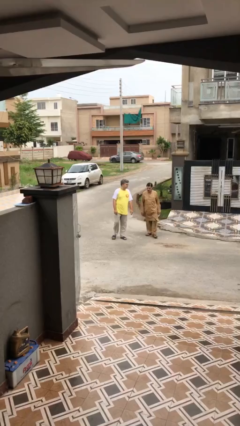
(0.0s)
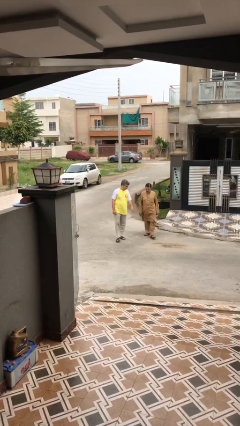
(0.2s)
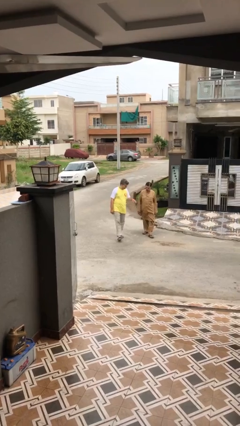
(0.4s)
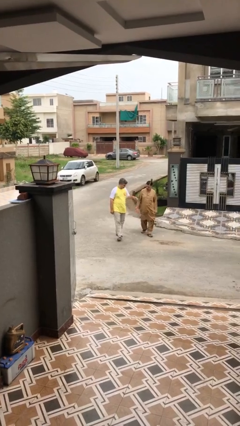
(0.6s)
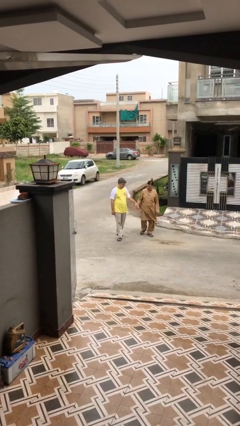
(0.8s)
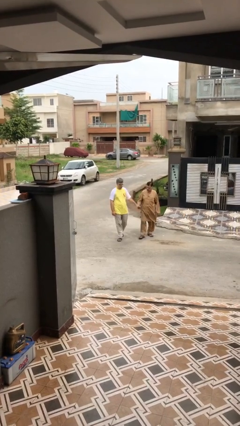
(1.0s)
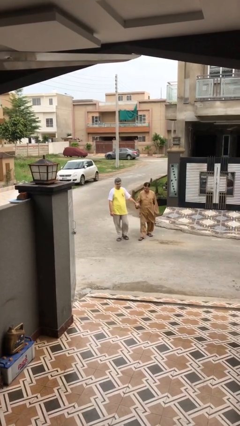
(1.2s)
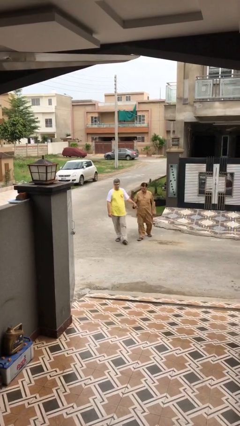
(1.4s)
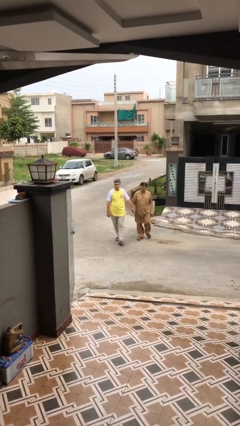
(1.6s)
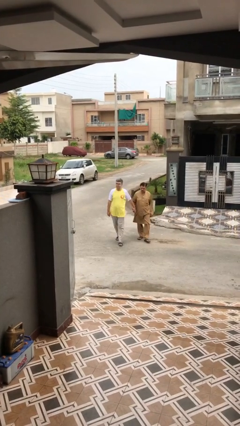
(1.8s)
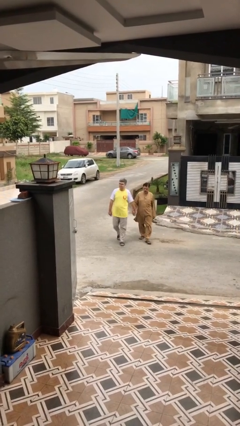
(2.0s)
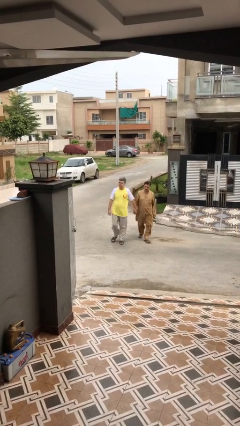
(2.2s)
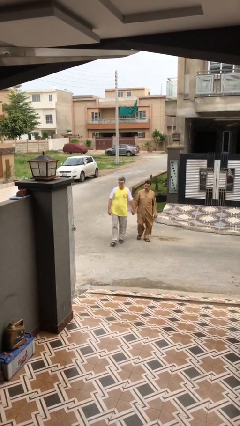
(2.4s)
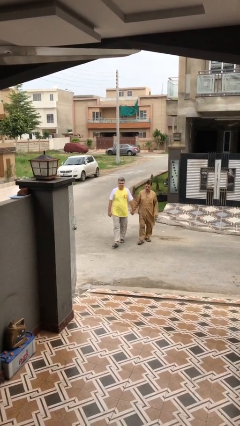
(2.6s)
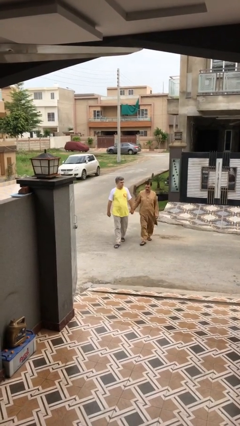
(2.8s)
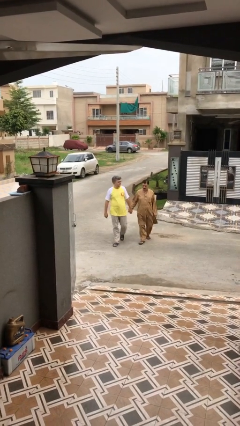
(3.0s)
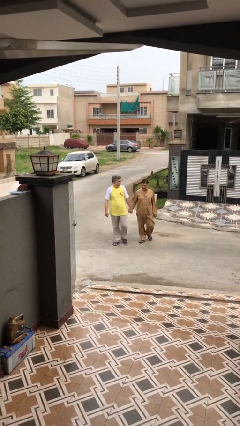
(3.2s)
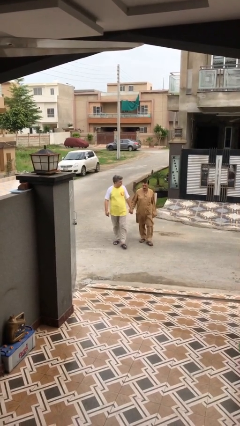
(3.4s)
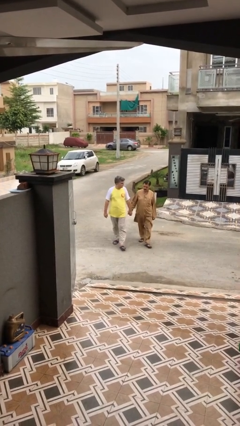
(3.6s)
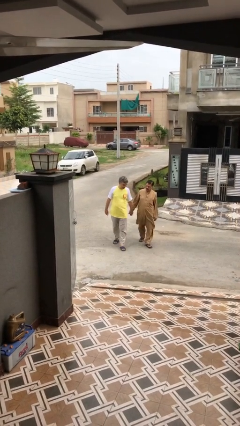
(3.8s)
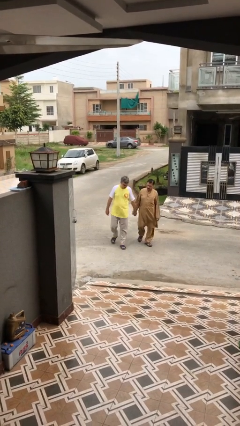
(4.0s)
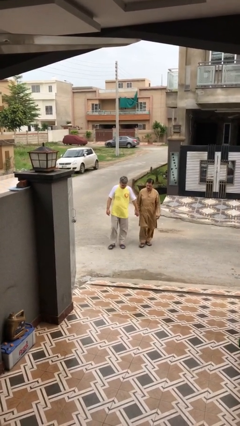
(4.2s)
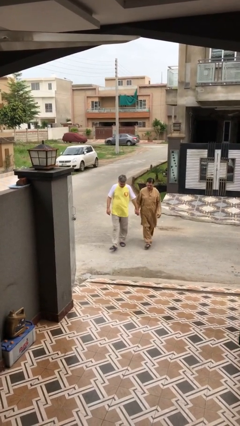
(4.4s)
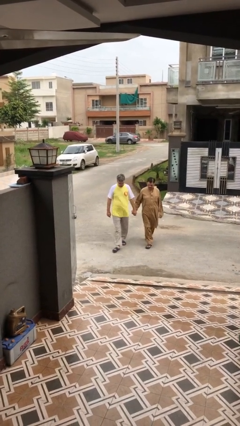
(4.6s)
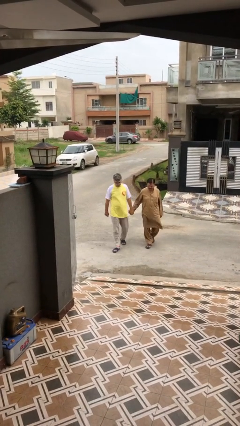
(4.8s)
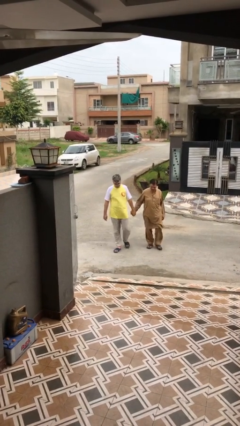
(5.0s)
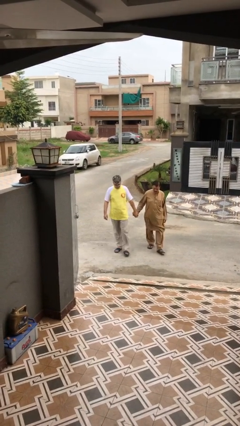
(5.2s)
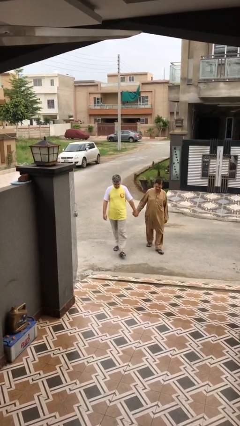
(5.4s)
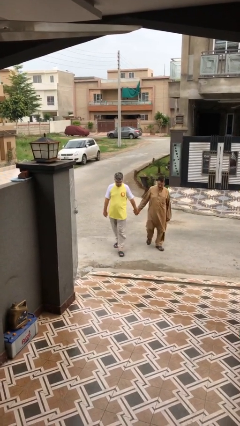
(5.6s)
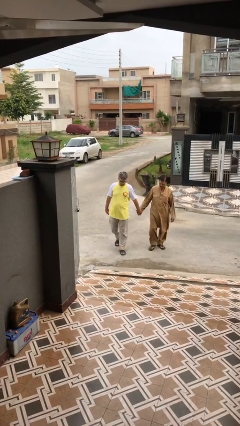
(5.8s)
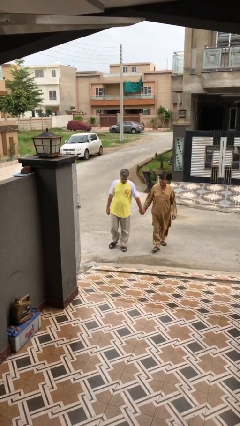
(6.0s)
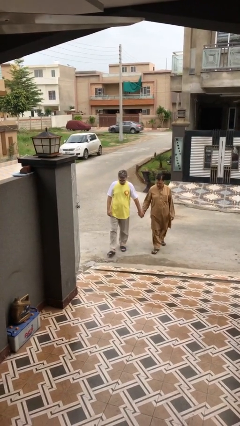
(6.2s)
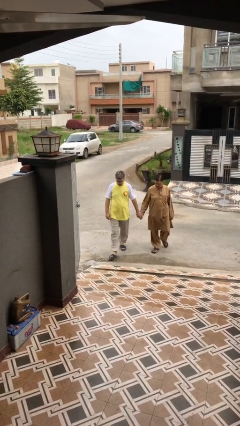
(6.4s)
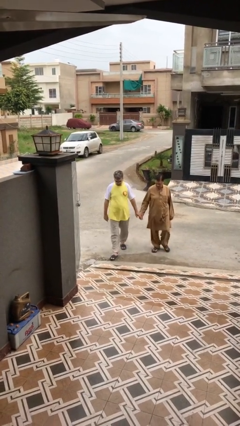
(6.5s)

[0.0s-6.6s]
person holds hand

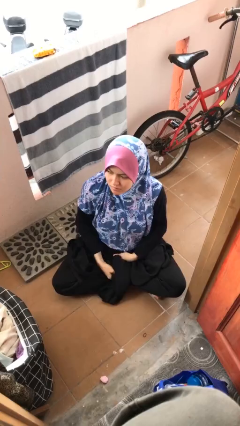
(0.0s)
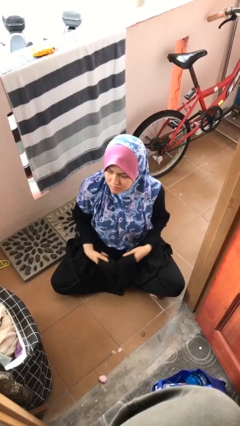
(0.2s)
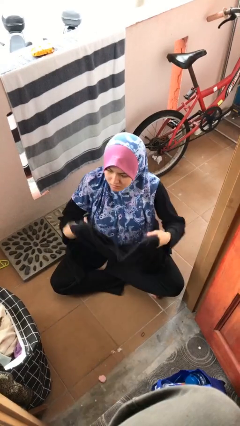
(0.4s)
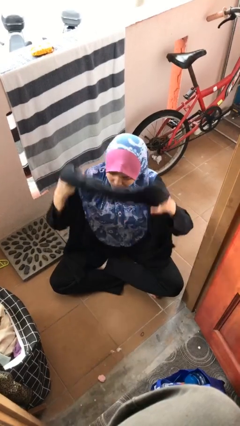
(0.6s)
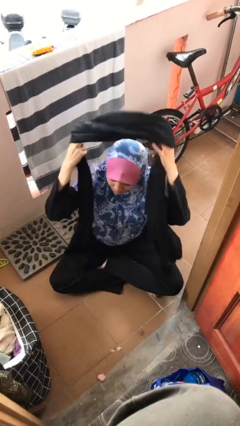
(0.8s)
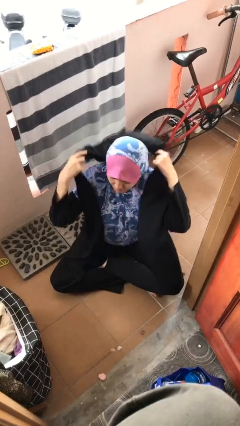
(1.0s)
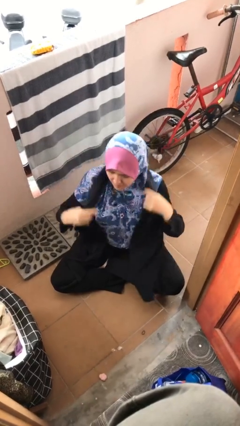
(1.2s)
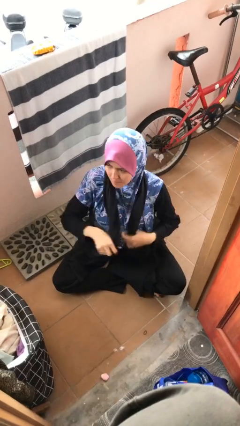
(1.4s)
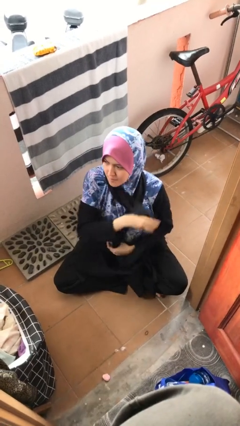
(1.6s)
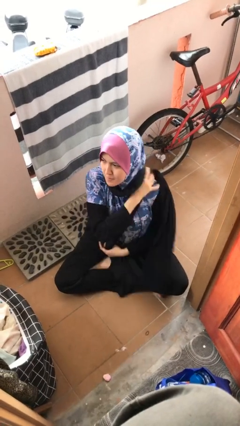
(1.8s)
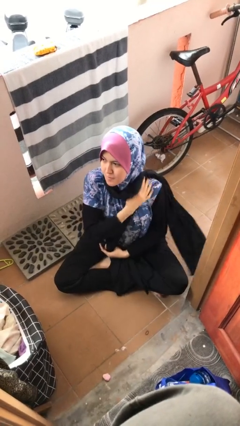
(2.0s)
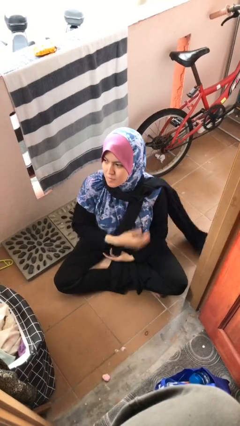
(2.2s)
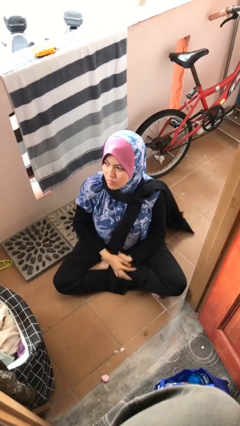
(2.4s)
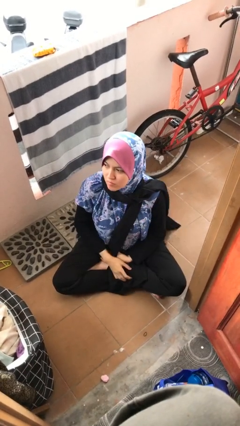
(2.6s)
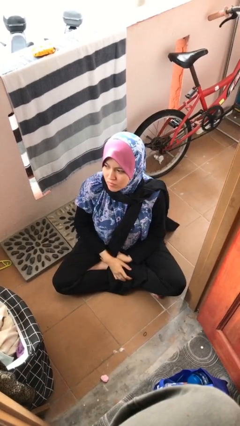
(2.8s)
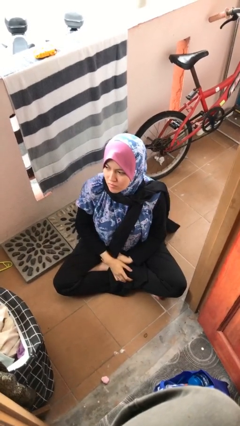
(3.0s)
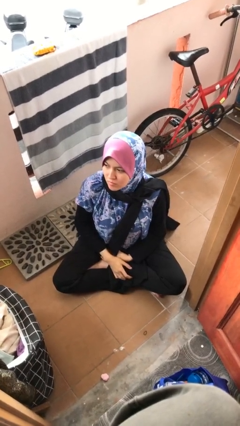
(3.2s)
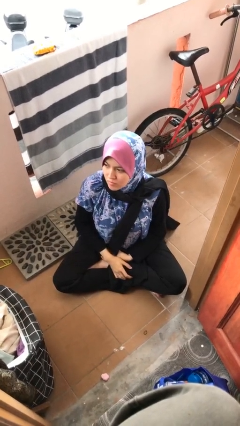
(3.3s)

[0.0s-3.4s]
person puts on scarf

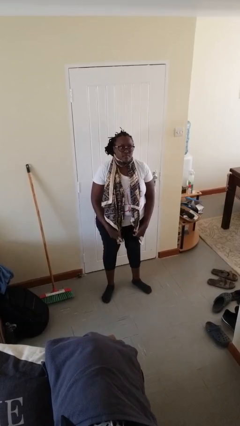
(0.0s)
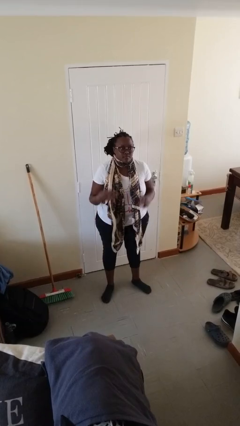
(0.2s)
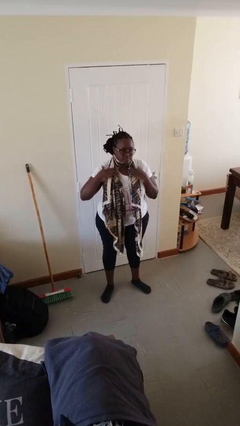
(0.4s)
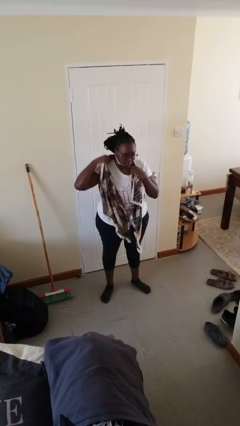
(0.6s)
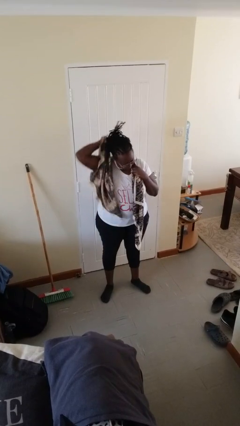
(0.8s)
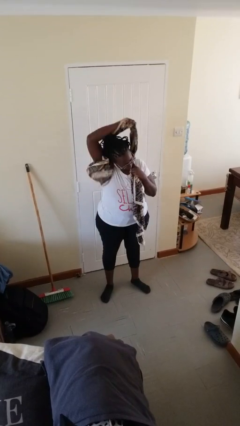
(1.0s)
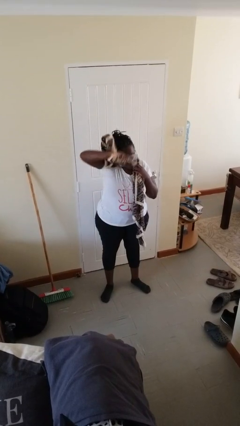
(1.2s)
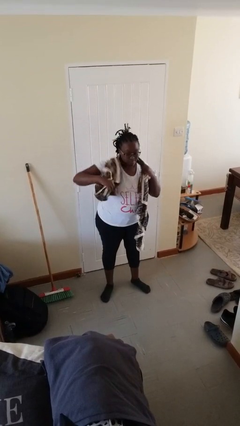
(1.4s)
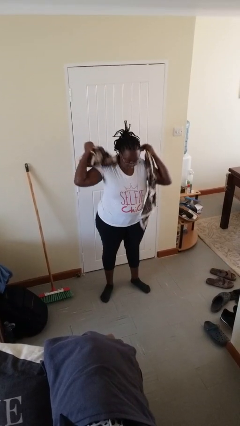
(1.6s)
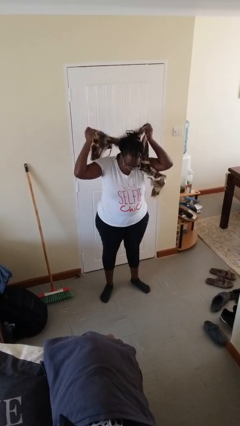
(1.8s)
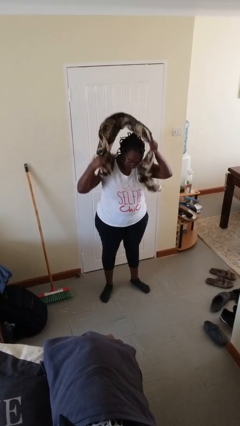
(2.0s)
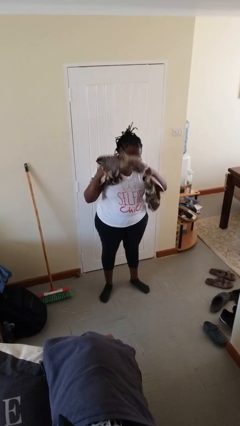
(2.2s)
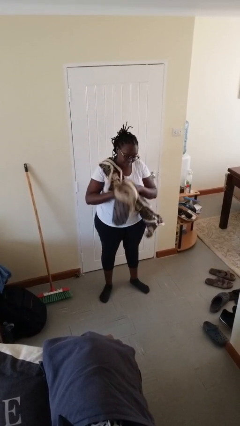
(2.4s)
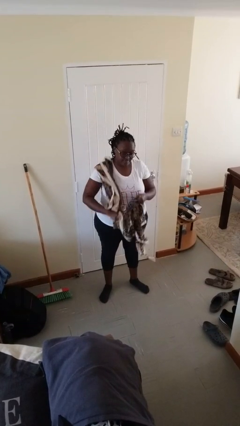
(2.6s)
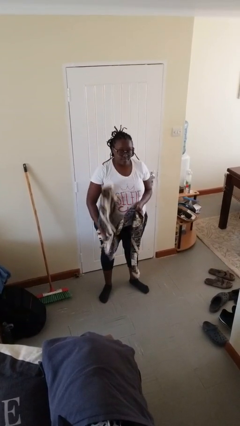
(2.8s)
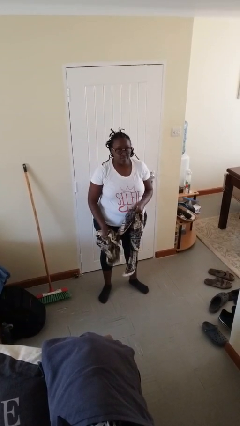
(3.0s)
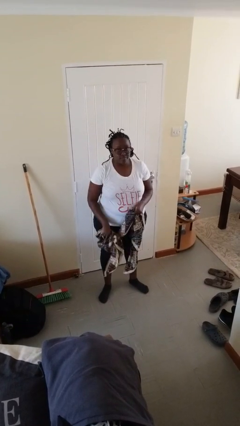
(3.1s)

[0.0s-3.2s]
person takes off scarf

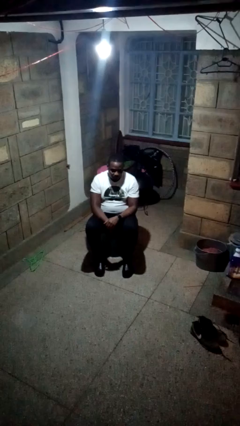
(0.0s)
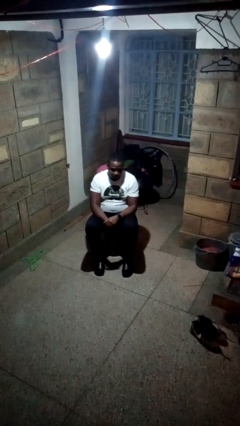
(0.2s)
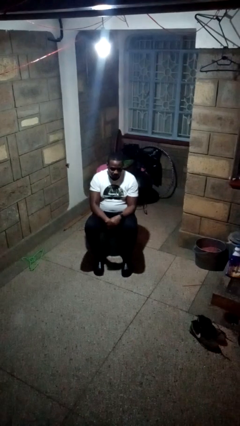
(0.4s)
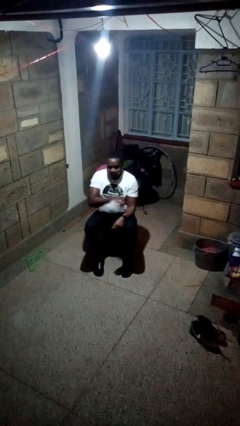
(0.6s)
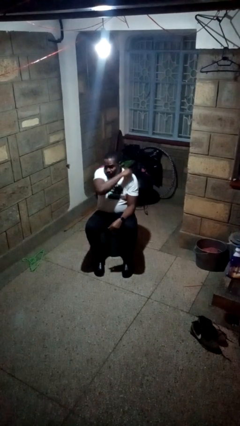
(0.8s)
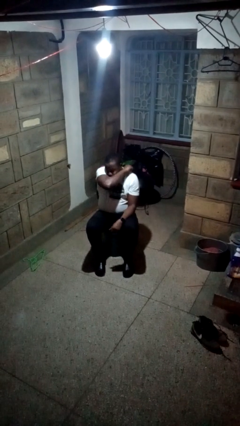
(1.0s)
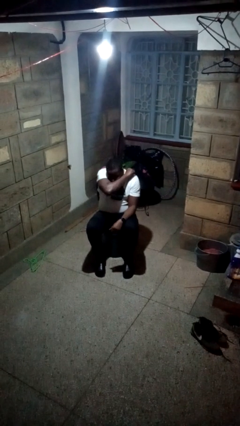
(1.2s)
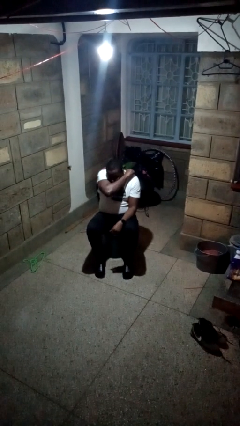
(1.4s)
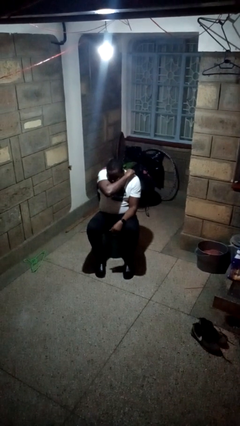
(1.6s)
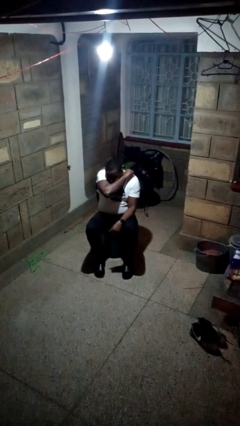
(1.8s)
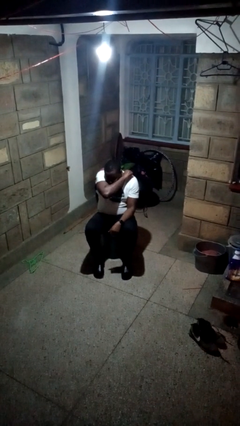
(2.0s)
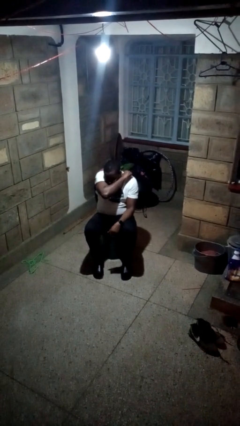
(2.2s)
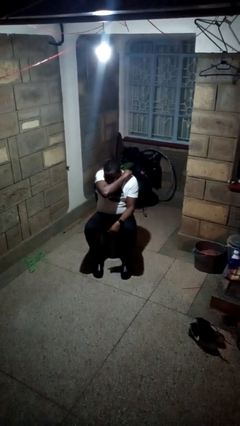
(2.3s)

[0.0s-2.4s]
person sneezes into arm

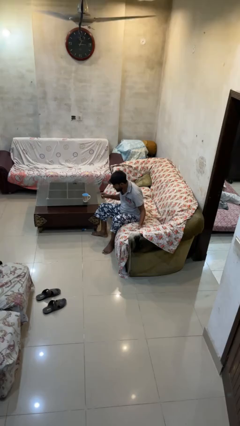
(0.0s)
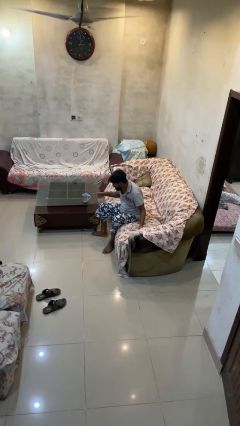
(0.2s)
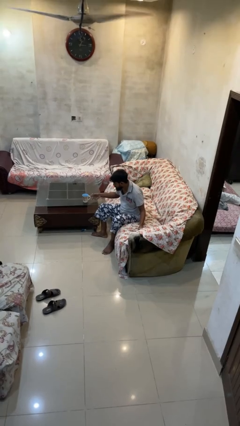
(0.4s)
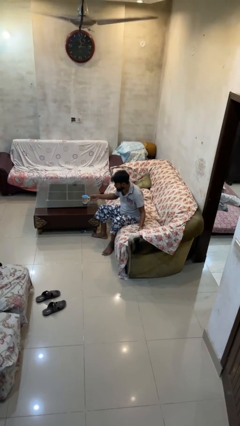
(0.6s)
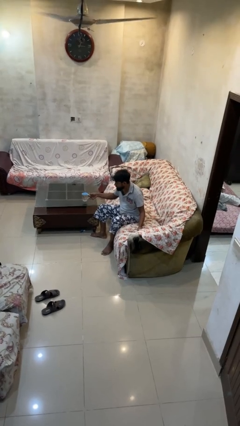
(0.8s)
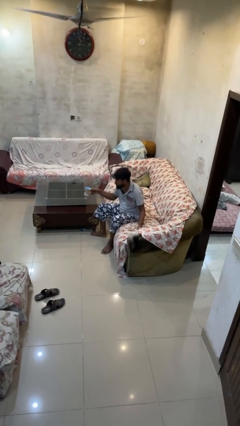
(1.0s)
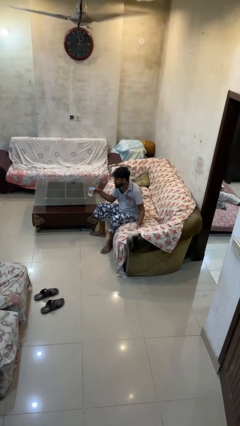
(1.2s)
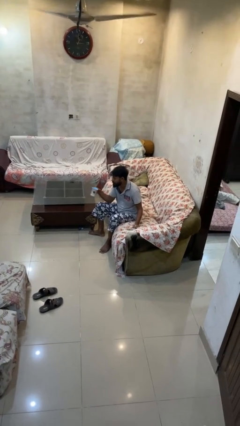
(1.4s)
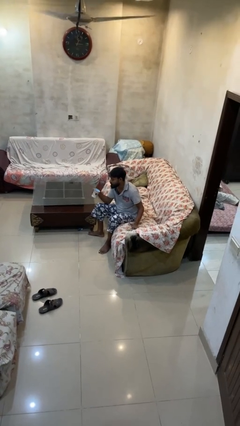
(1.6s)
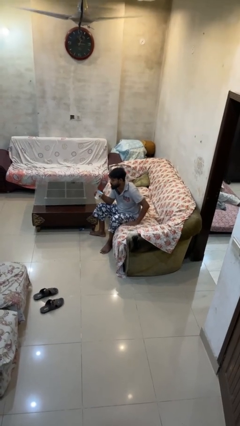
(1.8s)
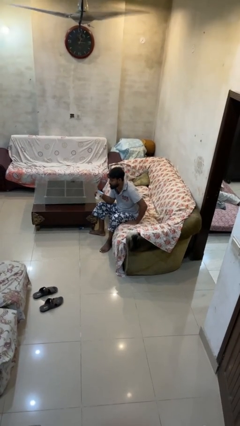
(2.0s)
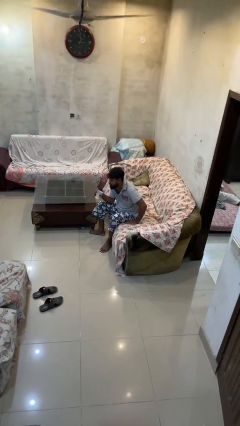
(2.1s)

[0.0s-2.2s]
person picks up object from table

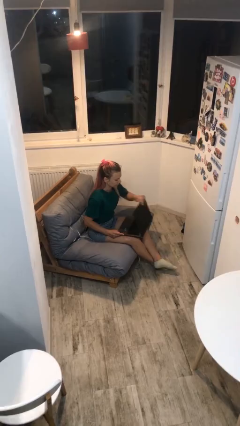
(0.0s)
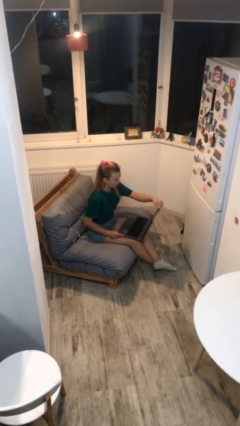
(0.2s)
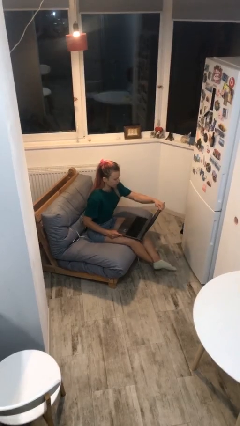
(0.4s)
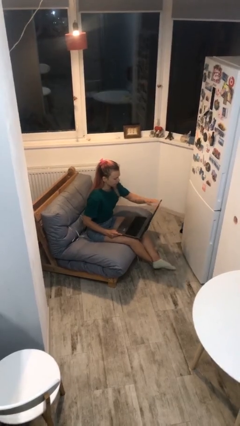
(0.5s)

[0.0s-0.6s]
person opens laptop
